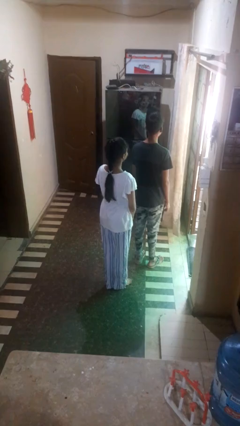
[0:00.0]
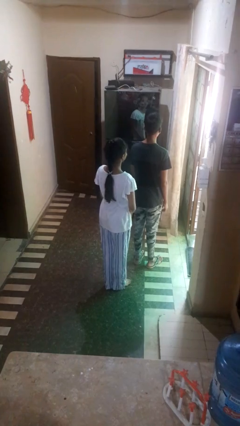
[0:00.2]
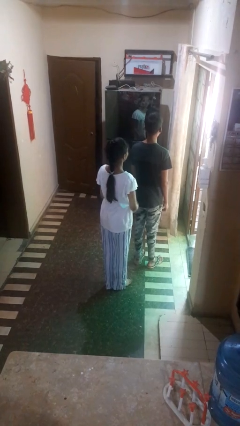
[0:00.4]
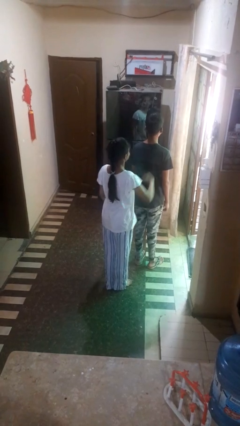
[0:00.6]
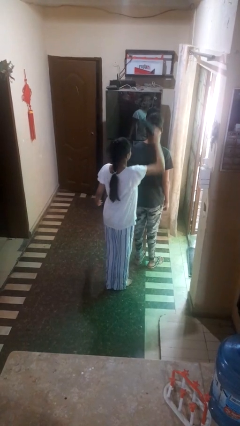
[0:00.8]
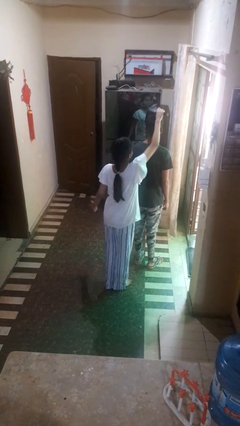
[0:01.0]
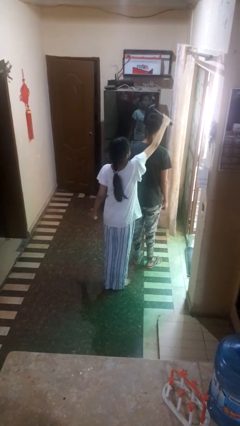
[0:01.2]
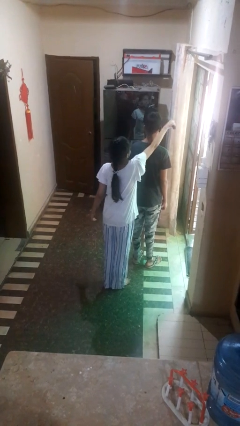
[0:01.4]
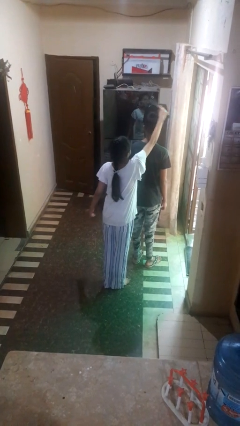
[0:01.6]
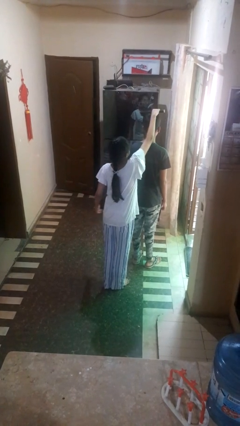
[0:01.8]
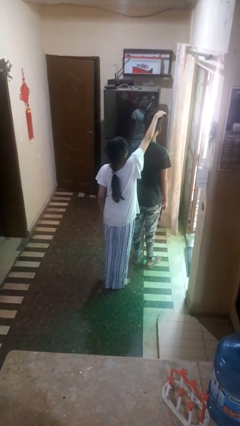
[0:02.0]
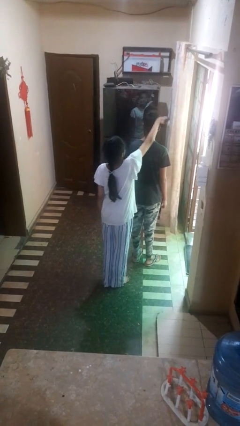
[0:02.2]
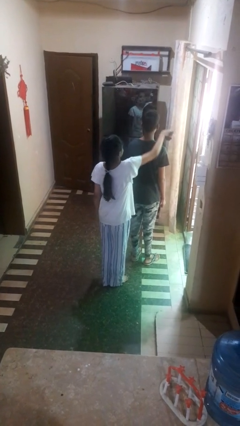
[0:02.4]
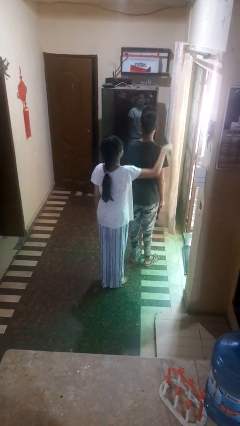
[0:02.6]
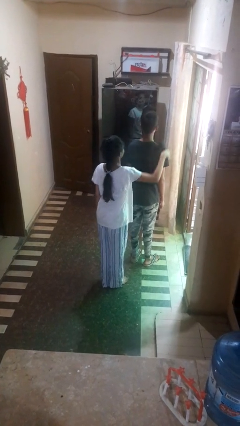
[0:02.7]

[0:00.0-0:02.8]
person brushes hair of person

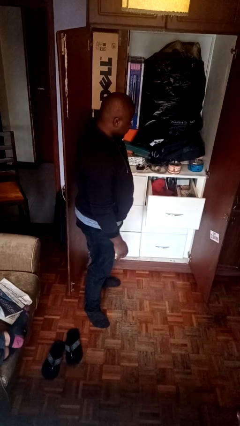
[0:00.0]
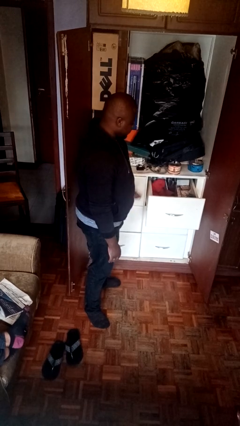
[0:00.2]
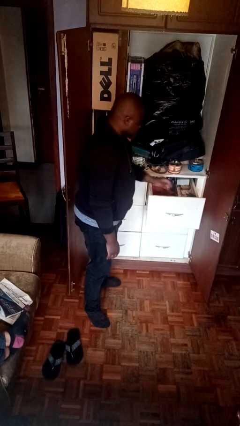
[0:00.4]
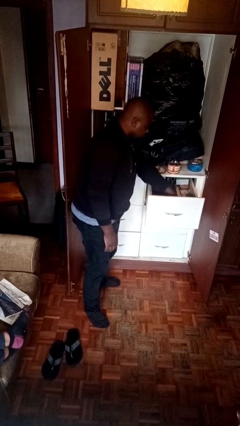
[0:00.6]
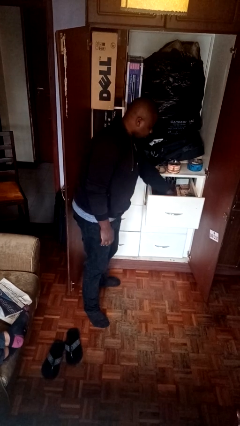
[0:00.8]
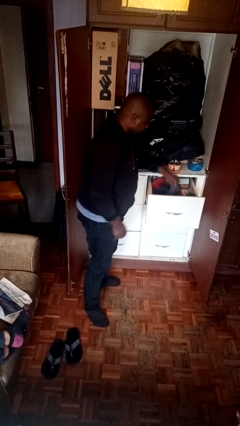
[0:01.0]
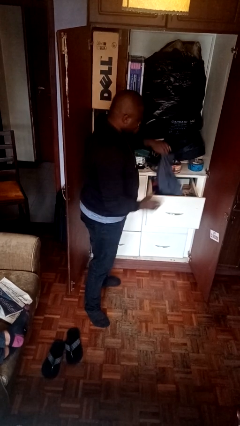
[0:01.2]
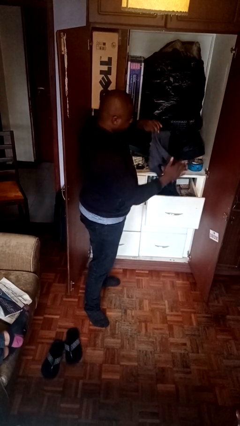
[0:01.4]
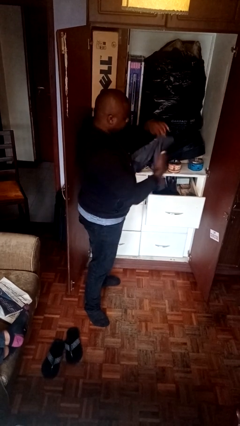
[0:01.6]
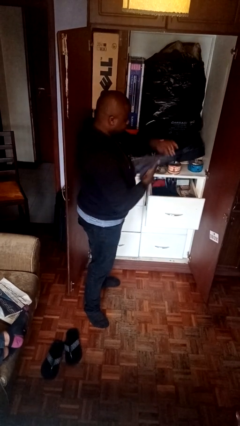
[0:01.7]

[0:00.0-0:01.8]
person takes clothes from dresser

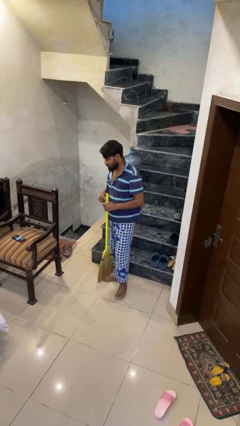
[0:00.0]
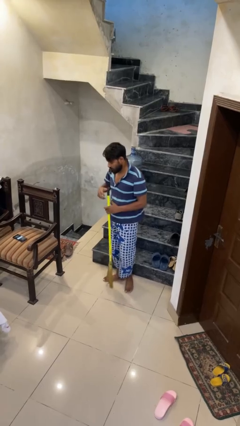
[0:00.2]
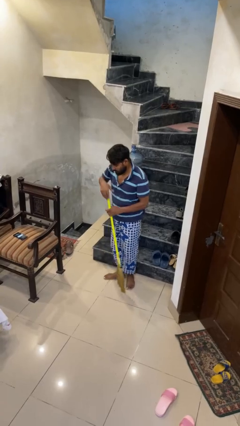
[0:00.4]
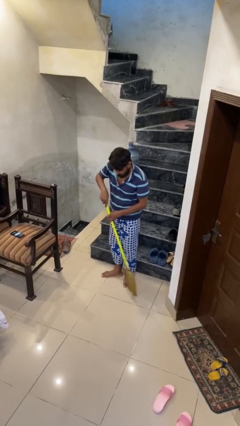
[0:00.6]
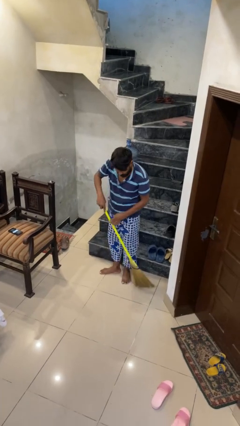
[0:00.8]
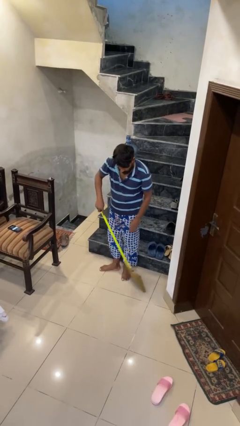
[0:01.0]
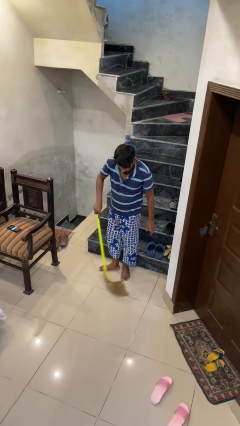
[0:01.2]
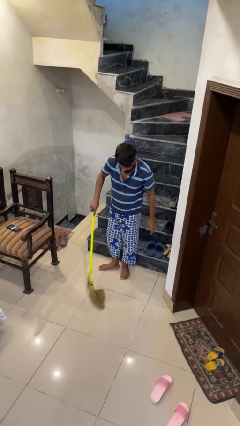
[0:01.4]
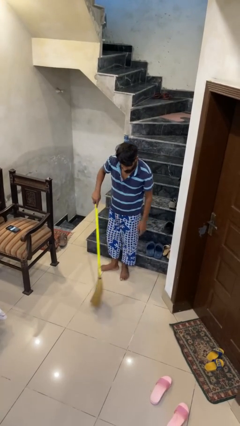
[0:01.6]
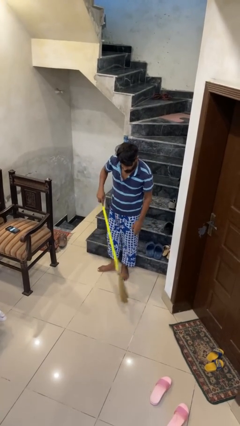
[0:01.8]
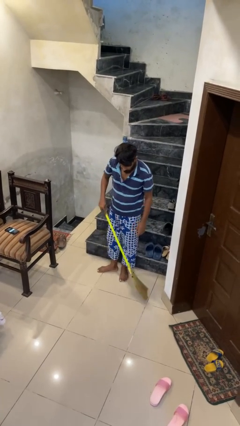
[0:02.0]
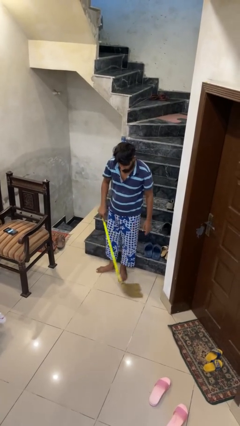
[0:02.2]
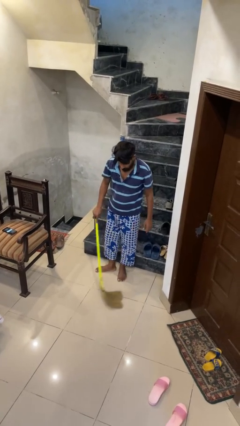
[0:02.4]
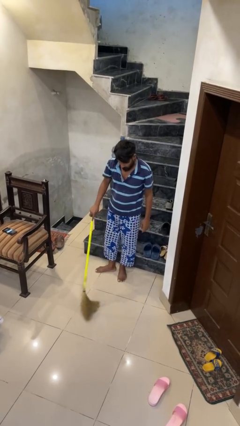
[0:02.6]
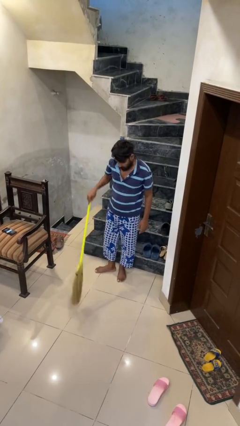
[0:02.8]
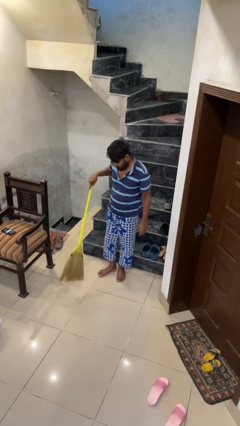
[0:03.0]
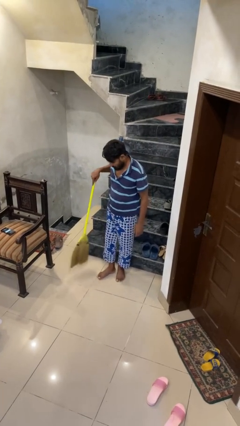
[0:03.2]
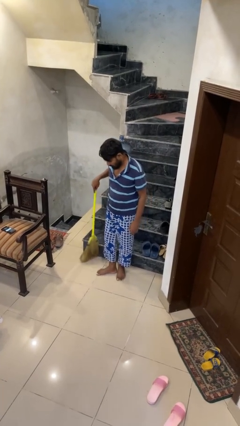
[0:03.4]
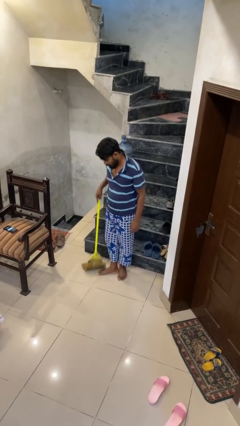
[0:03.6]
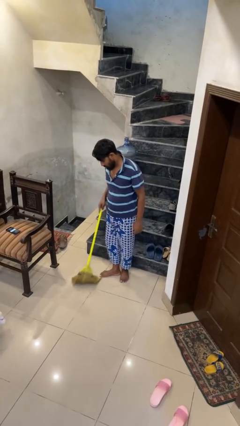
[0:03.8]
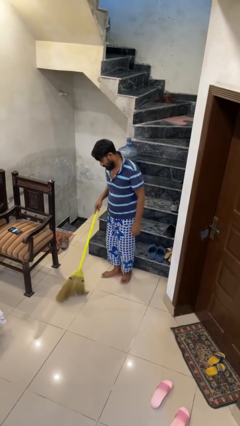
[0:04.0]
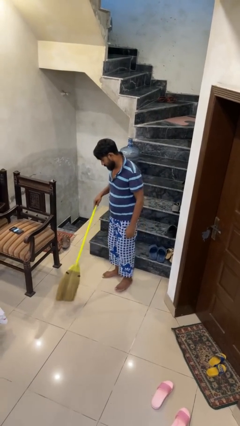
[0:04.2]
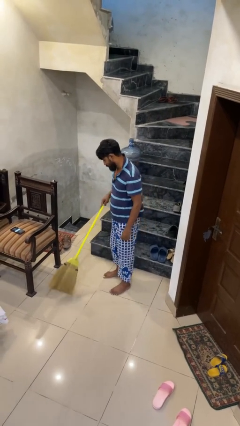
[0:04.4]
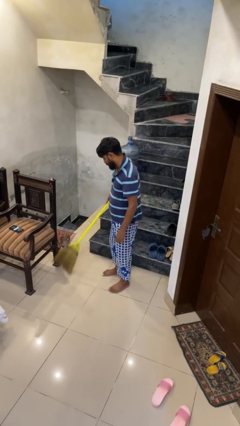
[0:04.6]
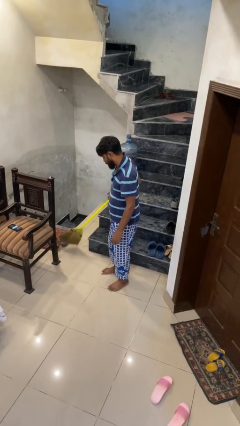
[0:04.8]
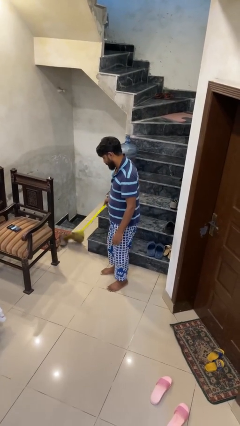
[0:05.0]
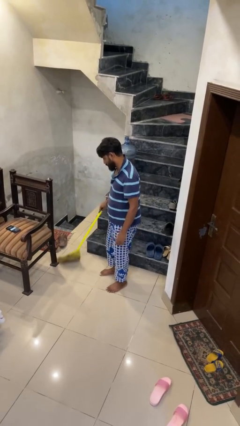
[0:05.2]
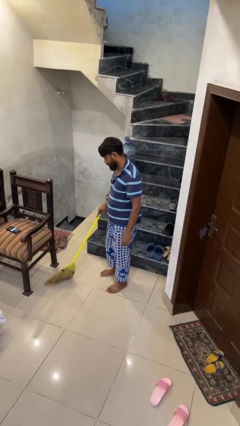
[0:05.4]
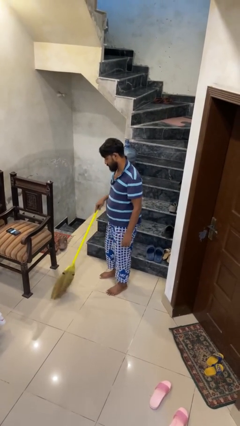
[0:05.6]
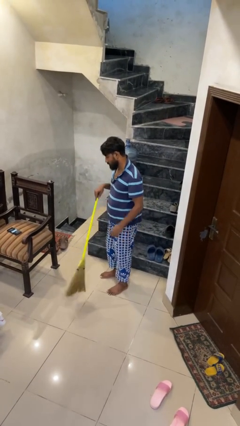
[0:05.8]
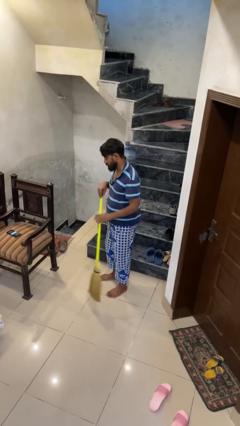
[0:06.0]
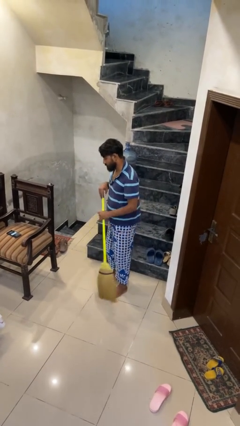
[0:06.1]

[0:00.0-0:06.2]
person sweeps floor

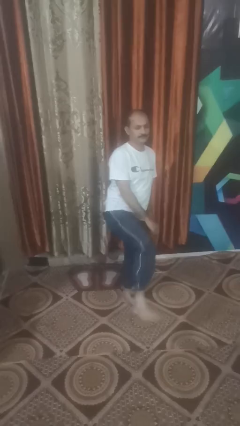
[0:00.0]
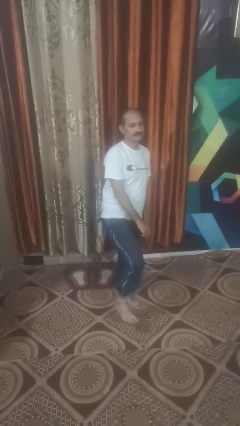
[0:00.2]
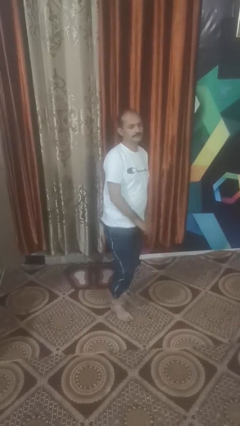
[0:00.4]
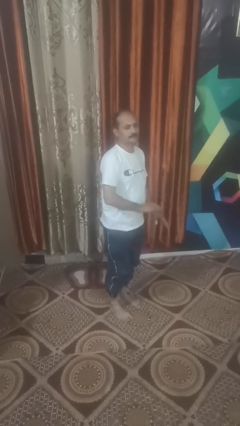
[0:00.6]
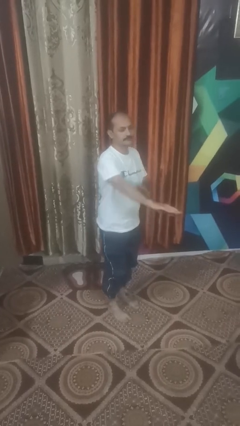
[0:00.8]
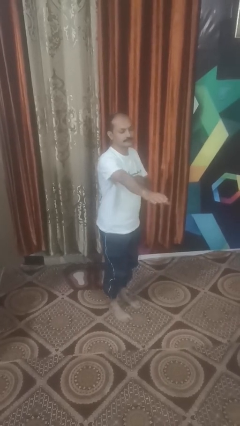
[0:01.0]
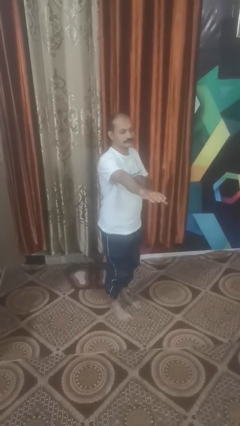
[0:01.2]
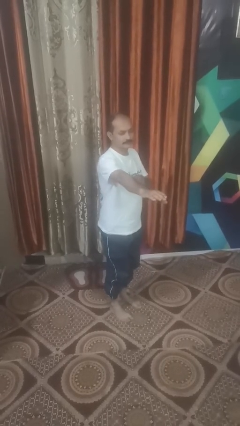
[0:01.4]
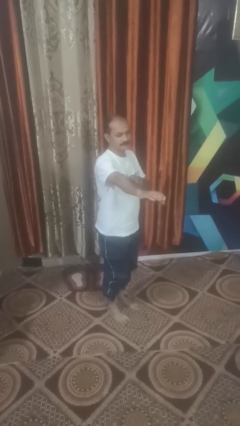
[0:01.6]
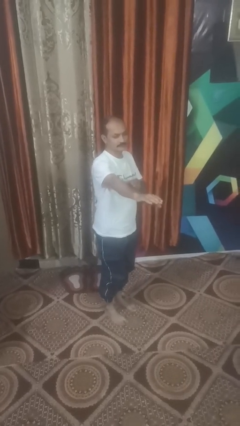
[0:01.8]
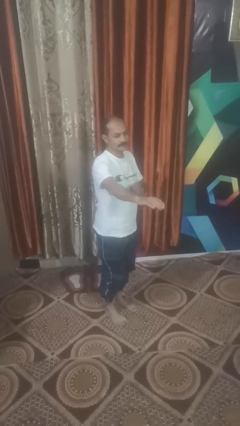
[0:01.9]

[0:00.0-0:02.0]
person karate chop

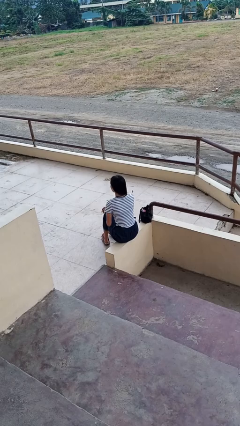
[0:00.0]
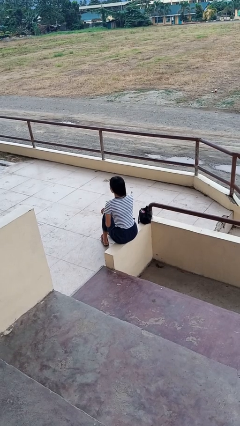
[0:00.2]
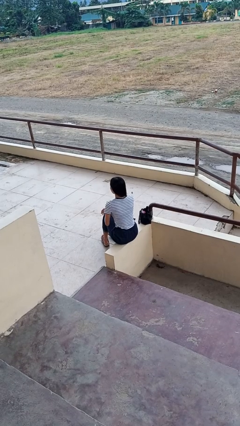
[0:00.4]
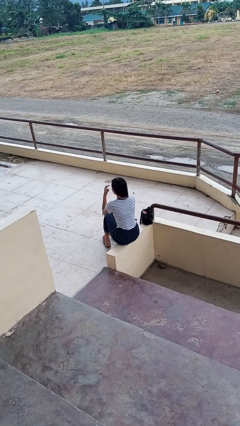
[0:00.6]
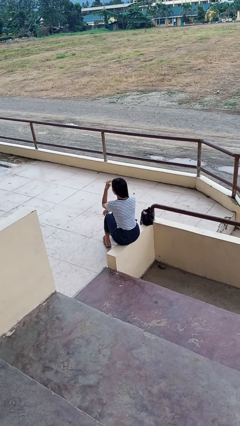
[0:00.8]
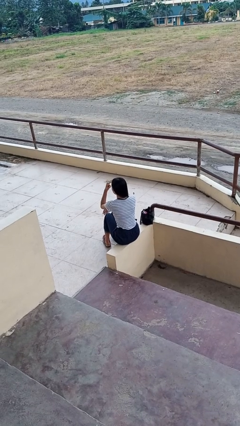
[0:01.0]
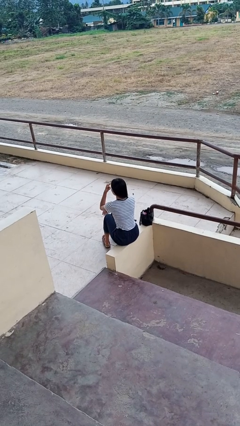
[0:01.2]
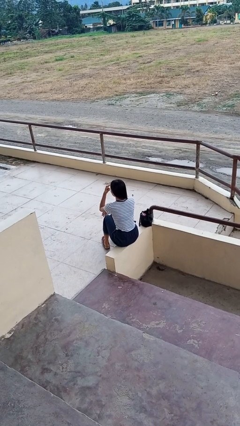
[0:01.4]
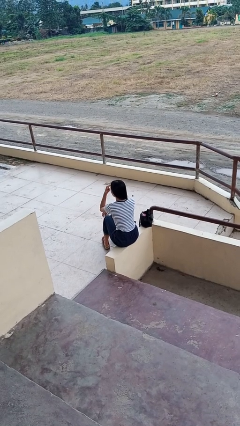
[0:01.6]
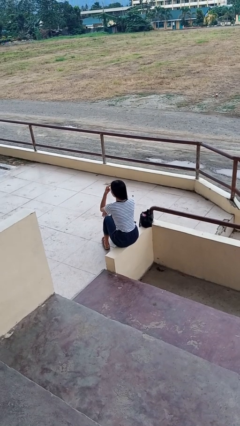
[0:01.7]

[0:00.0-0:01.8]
person gestures watch closely

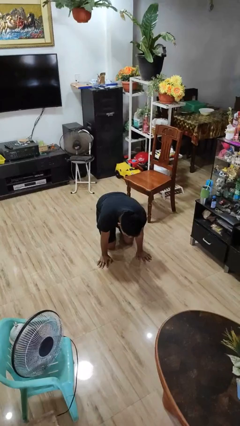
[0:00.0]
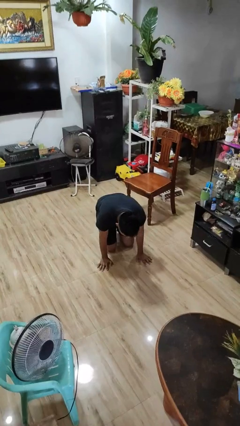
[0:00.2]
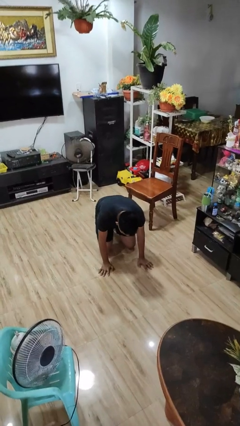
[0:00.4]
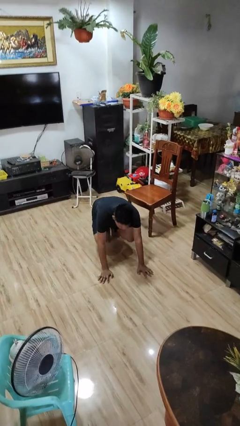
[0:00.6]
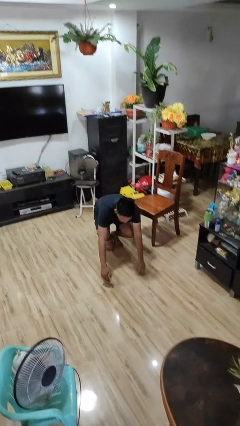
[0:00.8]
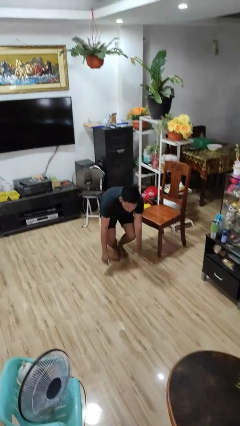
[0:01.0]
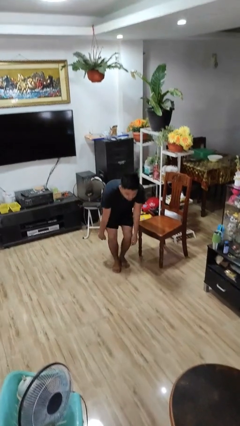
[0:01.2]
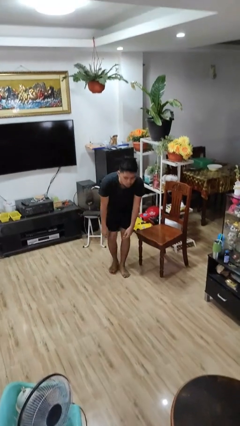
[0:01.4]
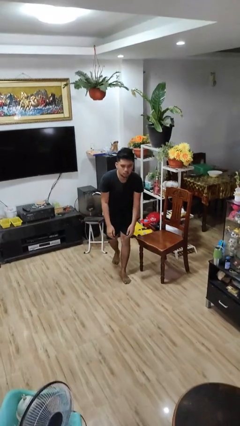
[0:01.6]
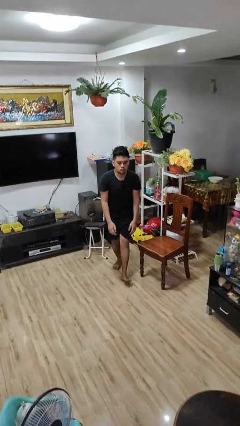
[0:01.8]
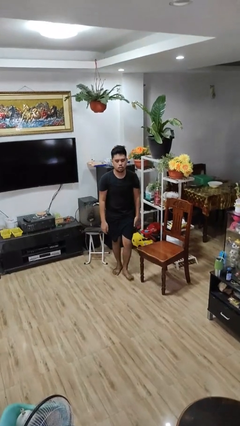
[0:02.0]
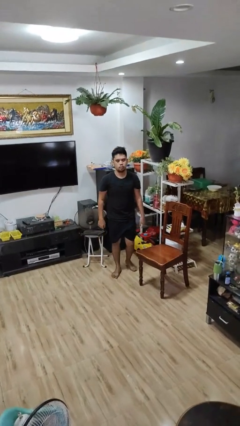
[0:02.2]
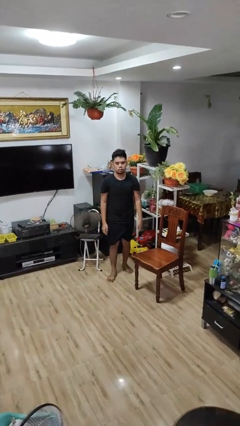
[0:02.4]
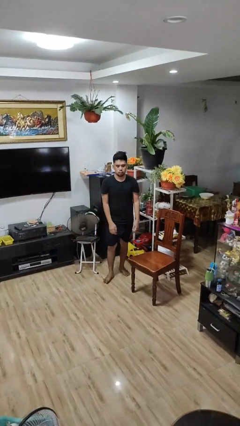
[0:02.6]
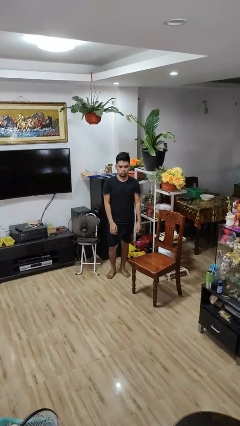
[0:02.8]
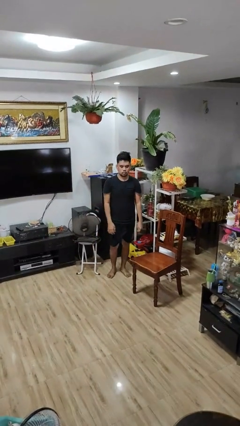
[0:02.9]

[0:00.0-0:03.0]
person stands up from floor
